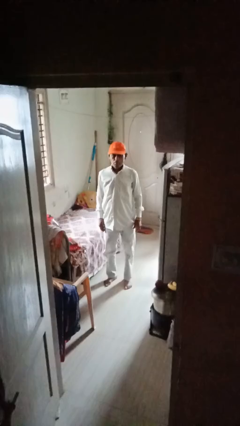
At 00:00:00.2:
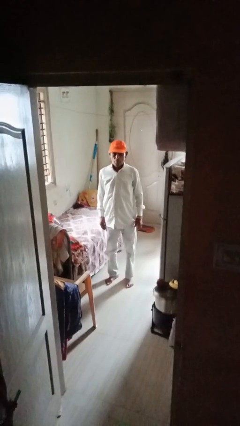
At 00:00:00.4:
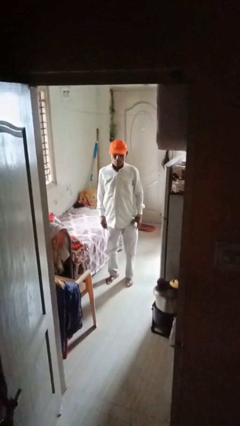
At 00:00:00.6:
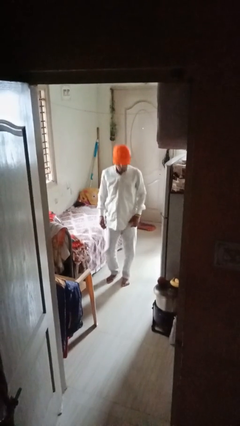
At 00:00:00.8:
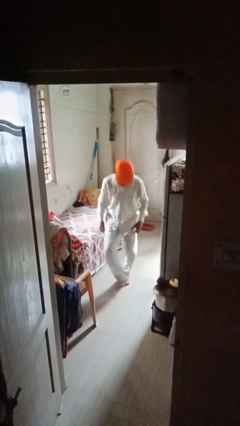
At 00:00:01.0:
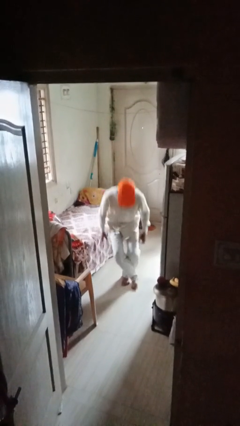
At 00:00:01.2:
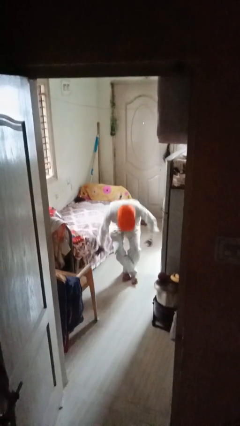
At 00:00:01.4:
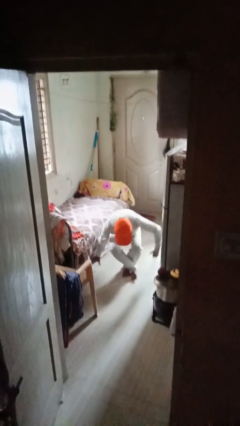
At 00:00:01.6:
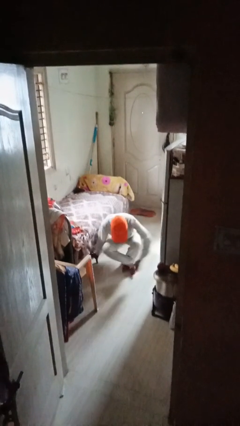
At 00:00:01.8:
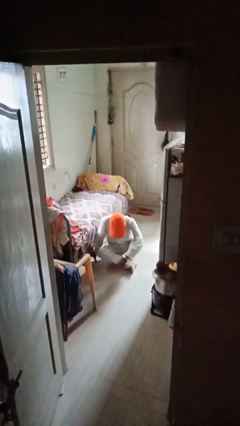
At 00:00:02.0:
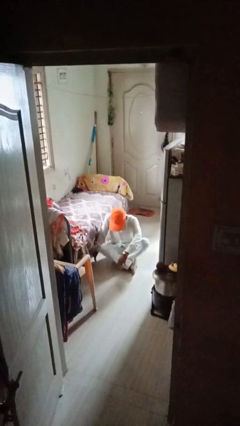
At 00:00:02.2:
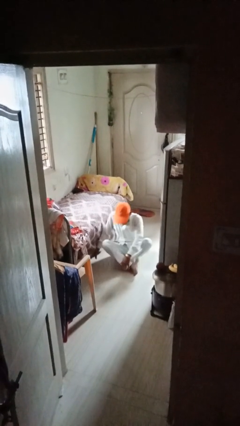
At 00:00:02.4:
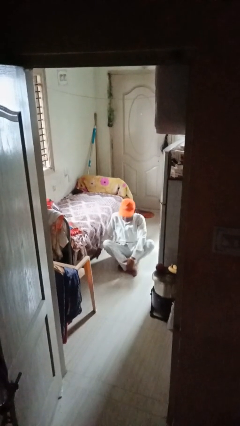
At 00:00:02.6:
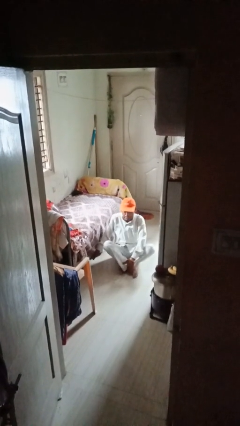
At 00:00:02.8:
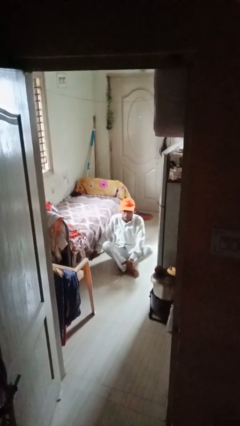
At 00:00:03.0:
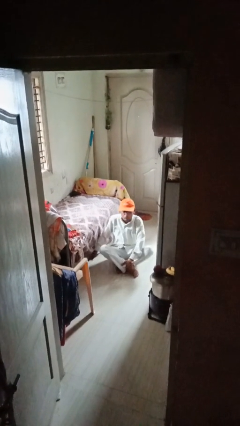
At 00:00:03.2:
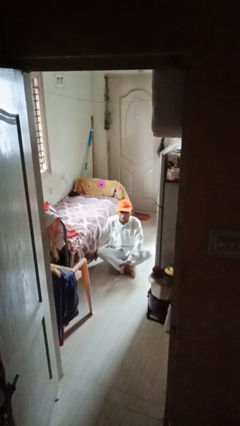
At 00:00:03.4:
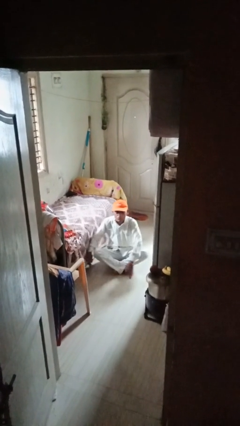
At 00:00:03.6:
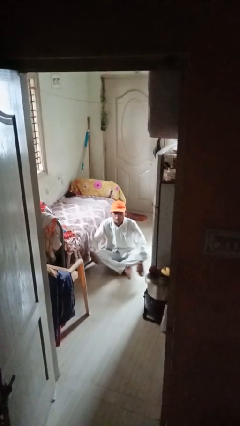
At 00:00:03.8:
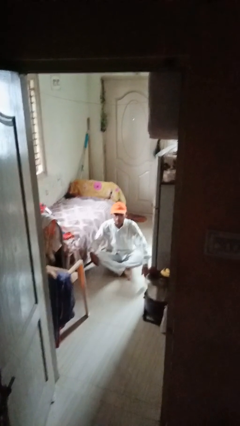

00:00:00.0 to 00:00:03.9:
person sits crisscross

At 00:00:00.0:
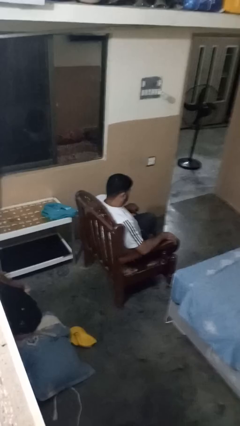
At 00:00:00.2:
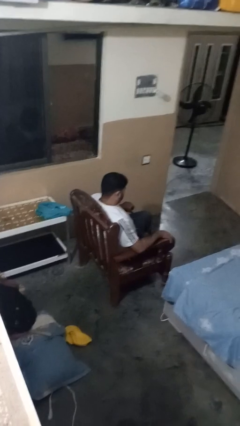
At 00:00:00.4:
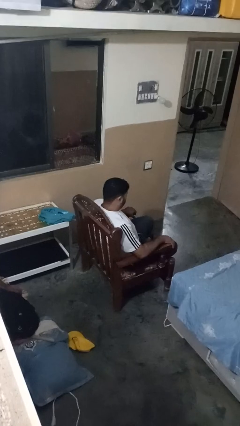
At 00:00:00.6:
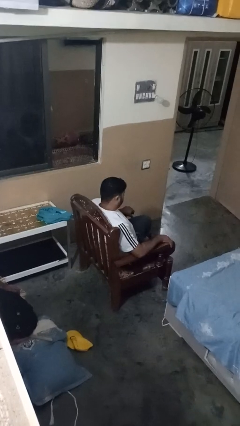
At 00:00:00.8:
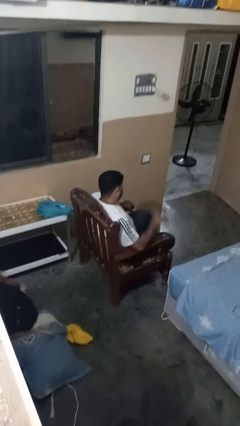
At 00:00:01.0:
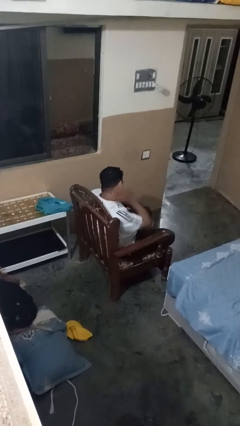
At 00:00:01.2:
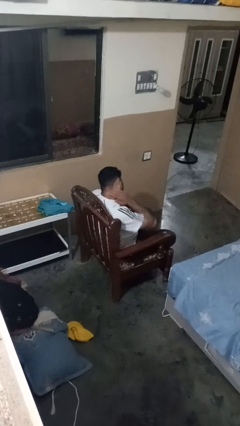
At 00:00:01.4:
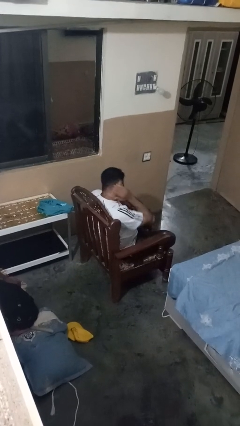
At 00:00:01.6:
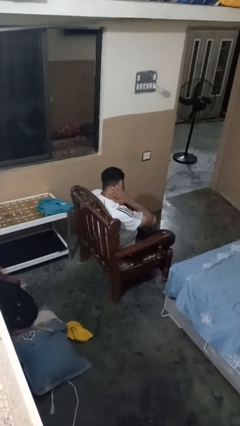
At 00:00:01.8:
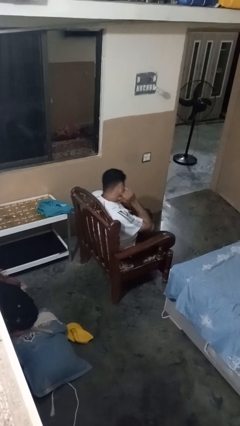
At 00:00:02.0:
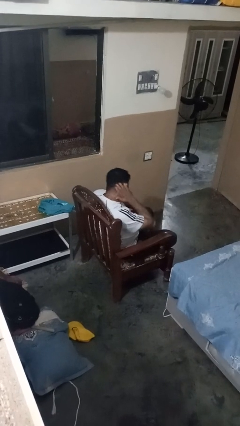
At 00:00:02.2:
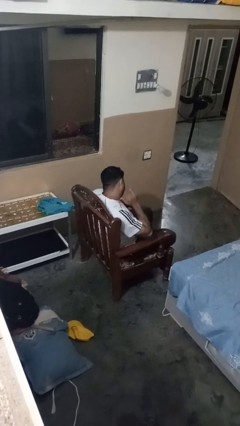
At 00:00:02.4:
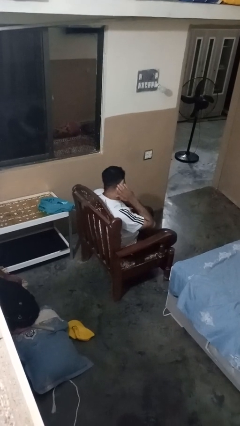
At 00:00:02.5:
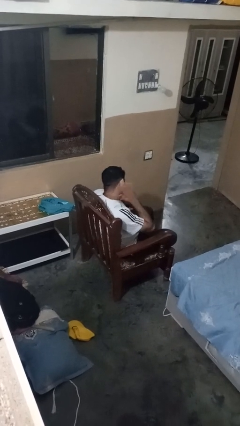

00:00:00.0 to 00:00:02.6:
person swats bug

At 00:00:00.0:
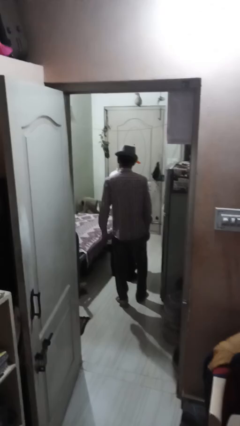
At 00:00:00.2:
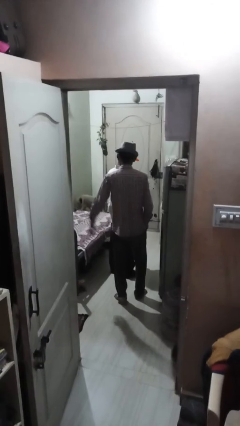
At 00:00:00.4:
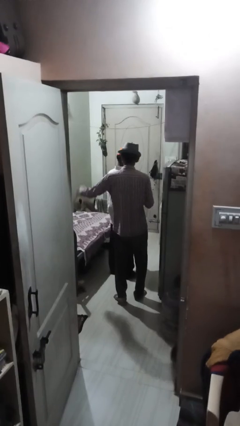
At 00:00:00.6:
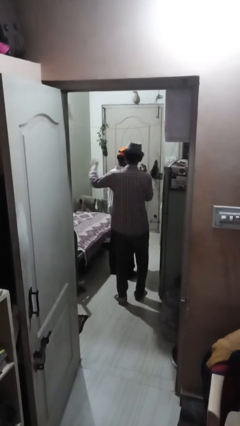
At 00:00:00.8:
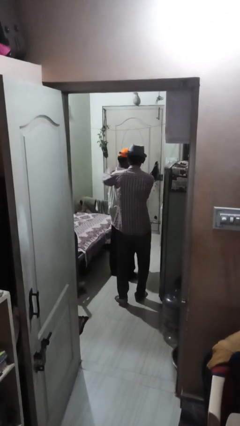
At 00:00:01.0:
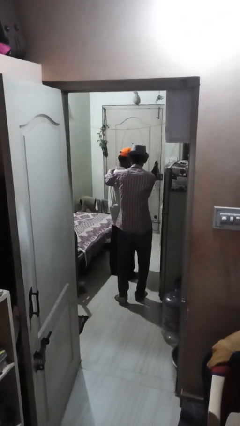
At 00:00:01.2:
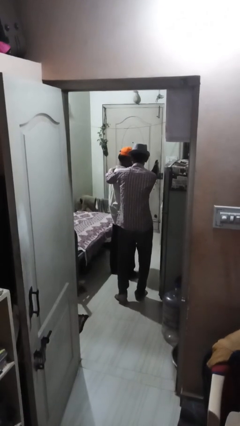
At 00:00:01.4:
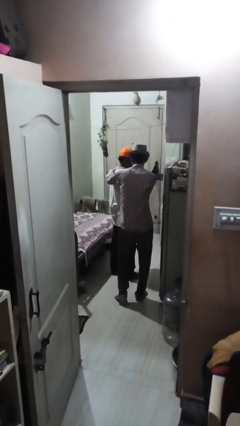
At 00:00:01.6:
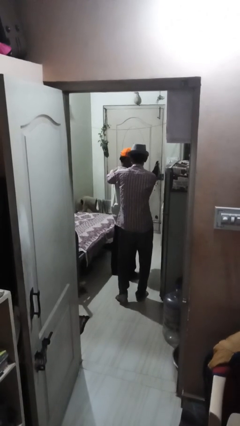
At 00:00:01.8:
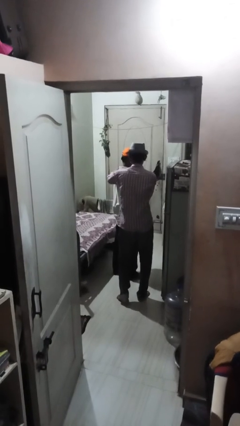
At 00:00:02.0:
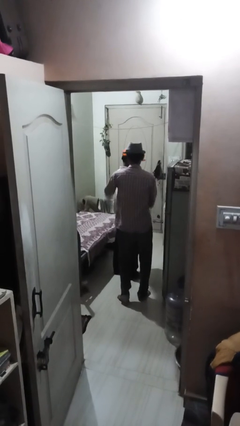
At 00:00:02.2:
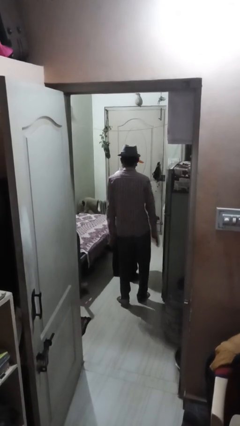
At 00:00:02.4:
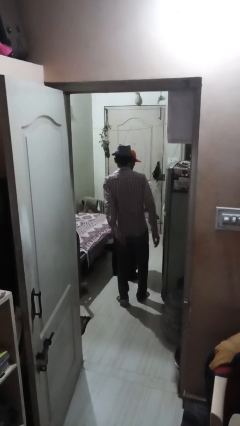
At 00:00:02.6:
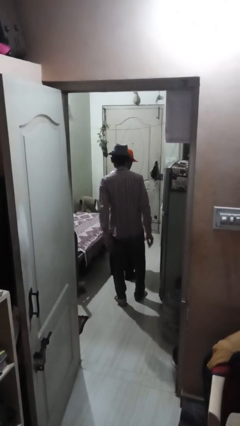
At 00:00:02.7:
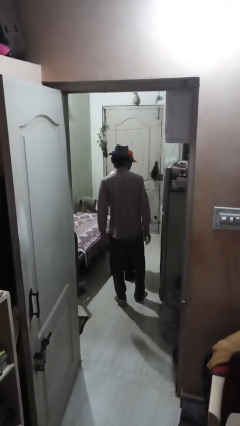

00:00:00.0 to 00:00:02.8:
person touches back of person

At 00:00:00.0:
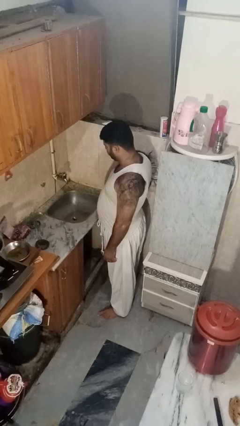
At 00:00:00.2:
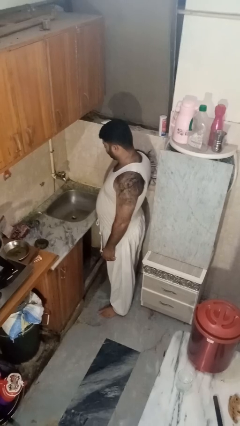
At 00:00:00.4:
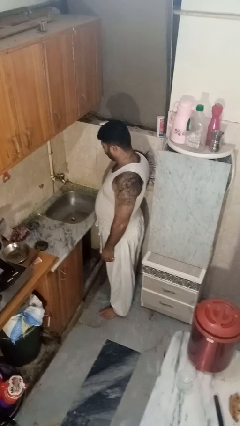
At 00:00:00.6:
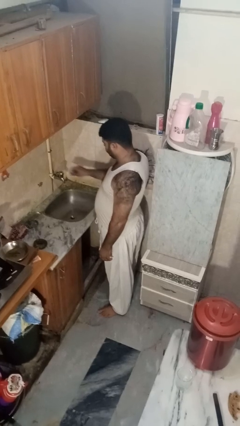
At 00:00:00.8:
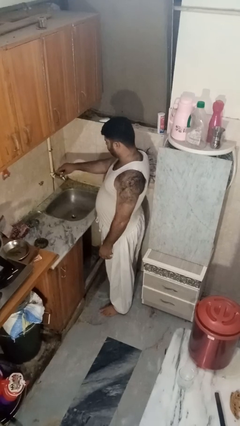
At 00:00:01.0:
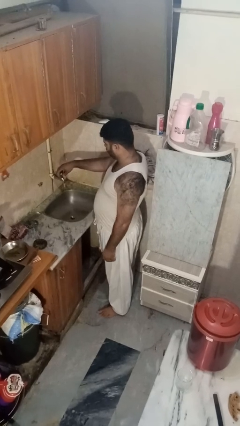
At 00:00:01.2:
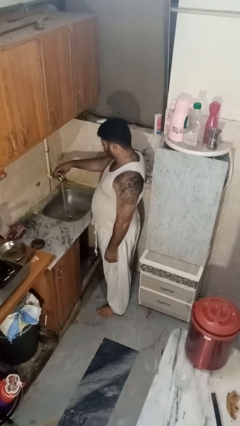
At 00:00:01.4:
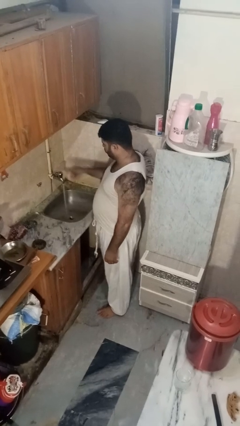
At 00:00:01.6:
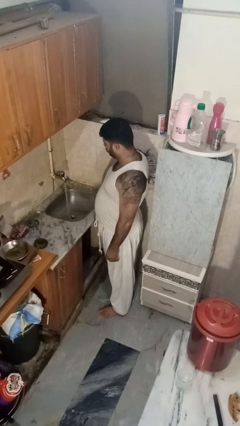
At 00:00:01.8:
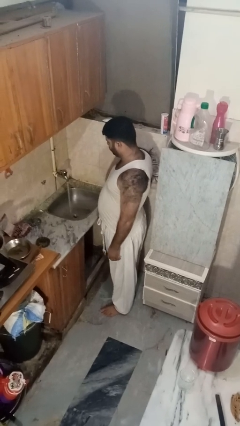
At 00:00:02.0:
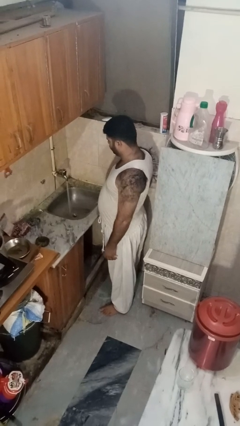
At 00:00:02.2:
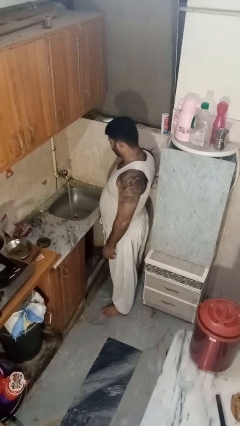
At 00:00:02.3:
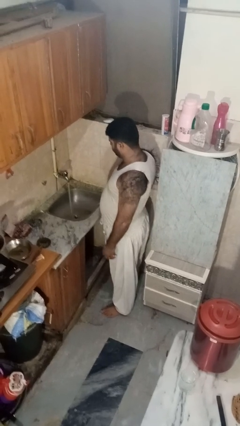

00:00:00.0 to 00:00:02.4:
person turns on faucet

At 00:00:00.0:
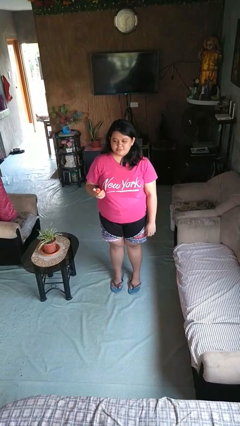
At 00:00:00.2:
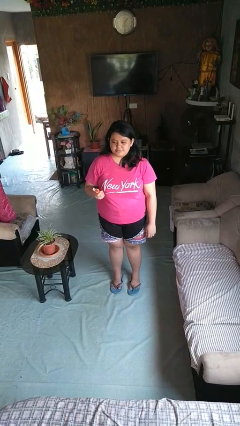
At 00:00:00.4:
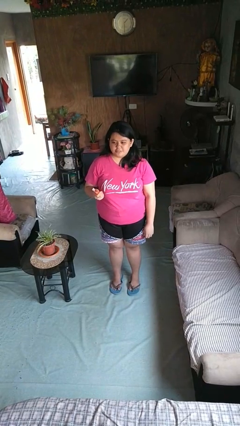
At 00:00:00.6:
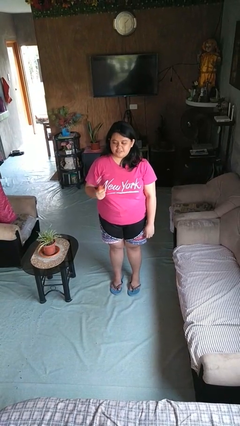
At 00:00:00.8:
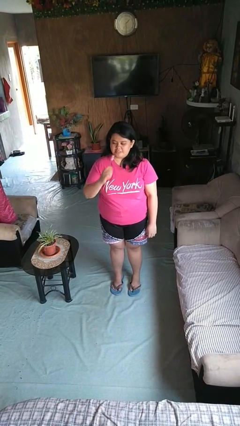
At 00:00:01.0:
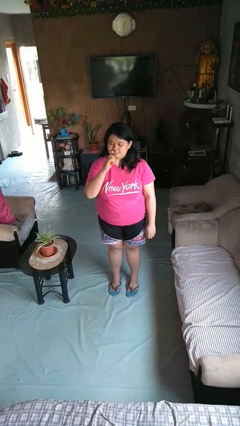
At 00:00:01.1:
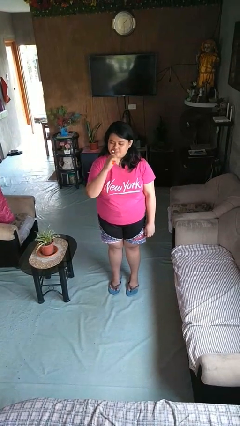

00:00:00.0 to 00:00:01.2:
person brushes teeth

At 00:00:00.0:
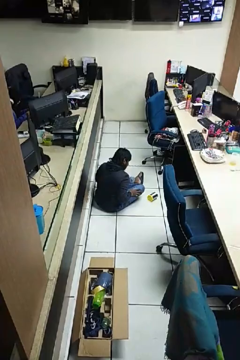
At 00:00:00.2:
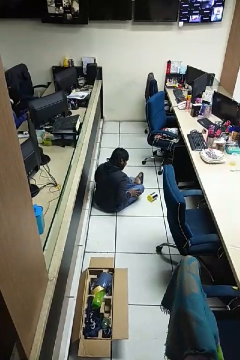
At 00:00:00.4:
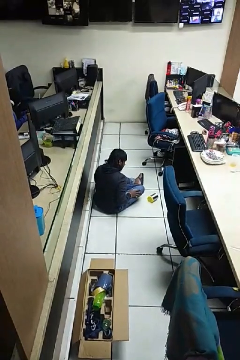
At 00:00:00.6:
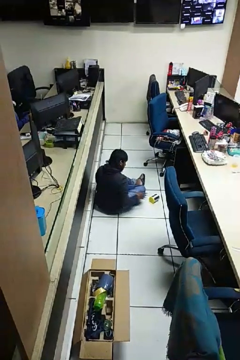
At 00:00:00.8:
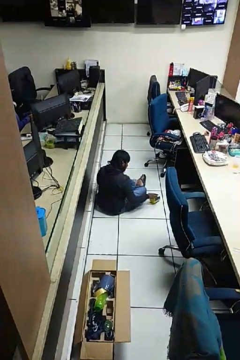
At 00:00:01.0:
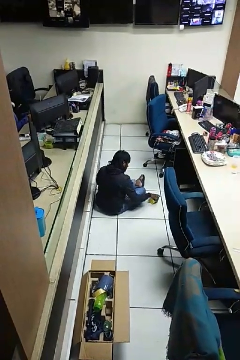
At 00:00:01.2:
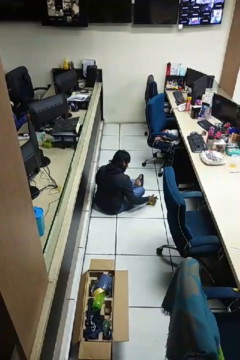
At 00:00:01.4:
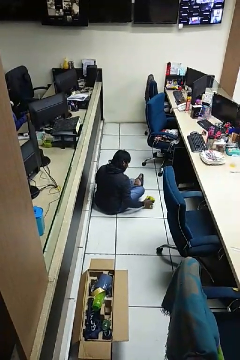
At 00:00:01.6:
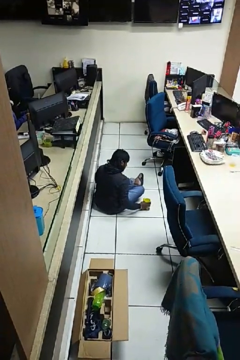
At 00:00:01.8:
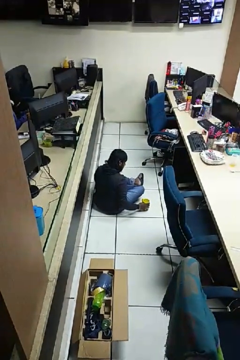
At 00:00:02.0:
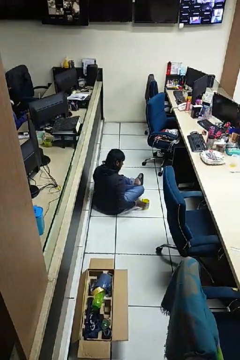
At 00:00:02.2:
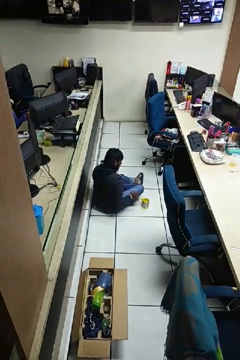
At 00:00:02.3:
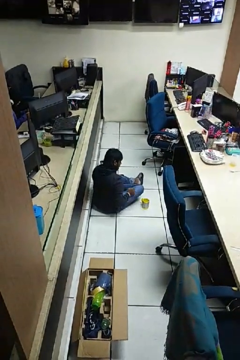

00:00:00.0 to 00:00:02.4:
person sets upright glass

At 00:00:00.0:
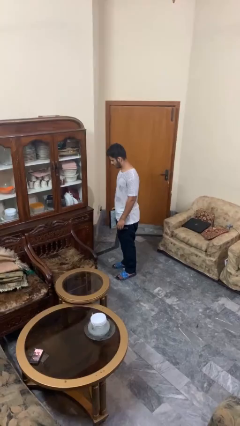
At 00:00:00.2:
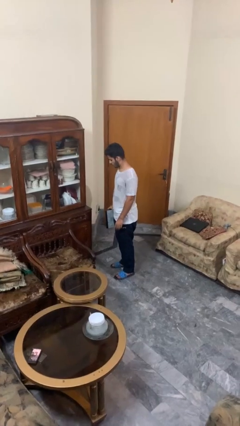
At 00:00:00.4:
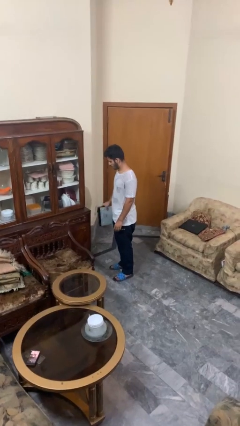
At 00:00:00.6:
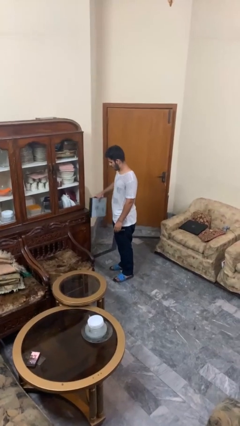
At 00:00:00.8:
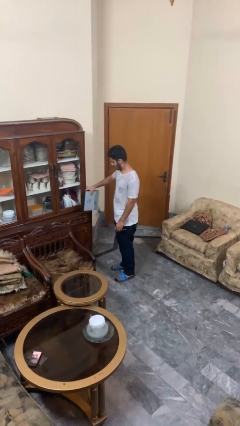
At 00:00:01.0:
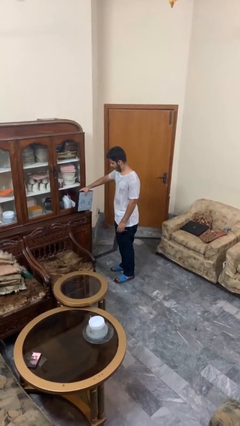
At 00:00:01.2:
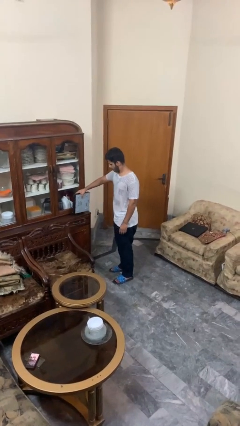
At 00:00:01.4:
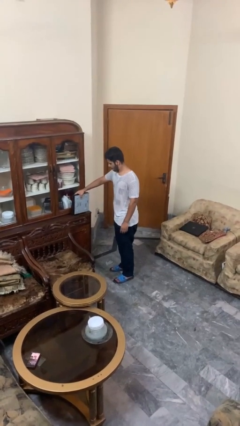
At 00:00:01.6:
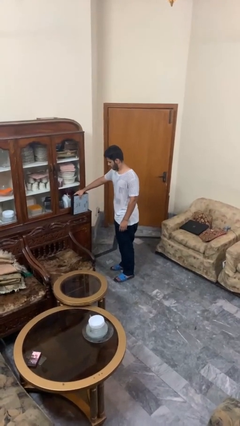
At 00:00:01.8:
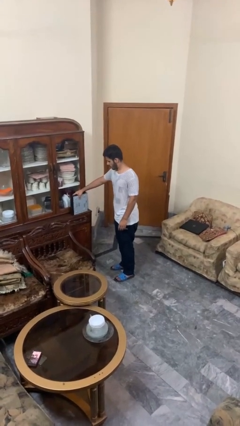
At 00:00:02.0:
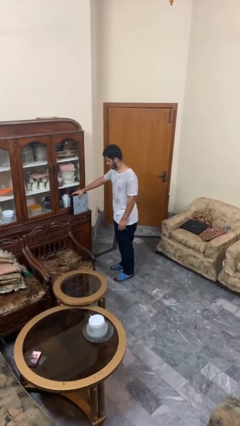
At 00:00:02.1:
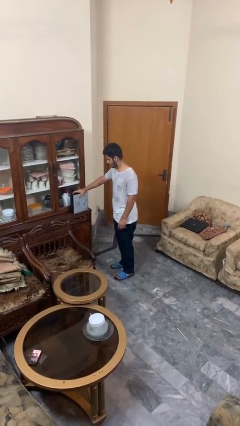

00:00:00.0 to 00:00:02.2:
person puts down object on countertop
